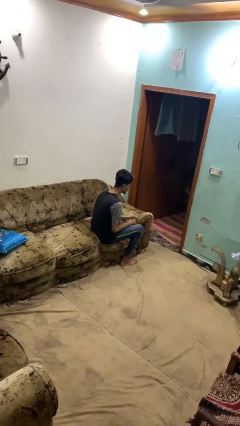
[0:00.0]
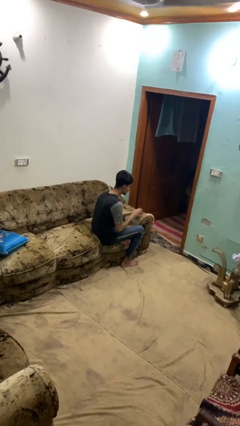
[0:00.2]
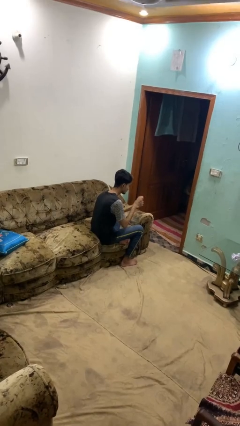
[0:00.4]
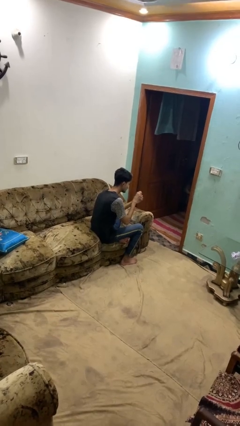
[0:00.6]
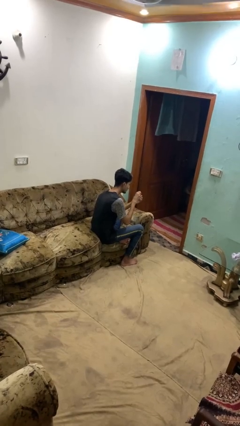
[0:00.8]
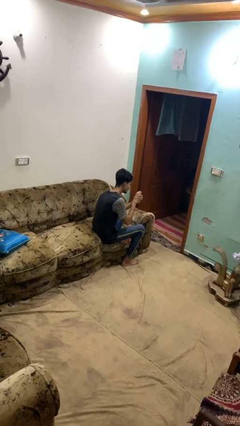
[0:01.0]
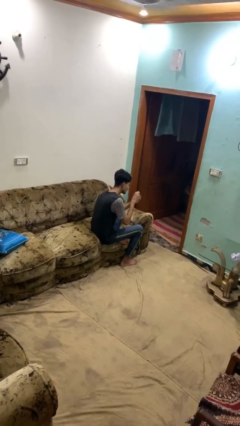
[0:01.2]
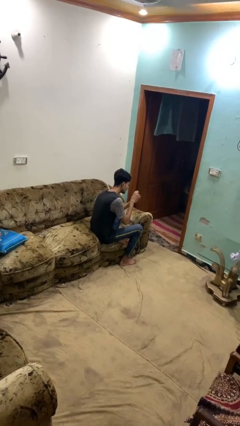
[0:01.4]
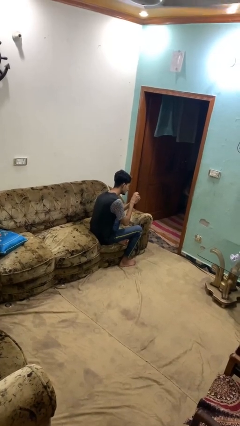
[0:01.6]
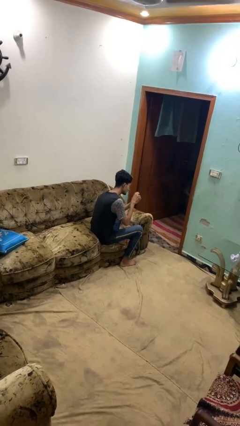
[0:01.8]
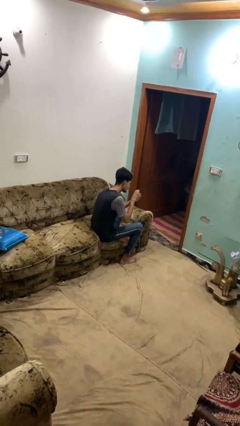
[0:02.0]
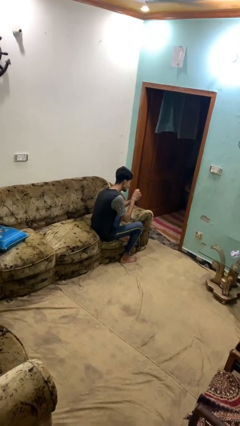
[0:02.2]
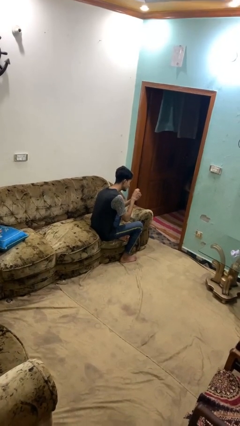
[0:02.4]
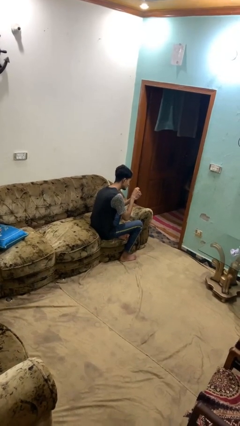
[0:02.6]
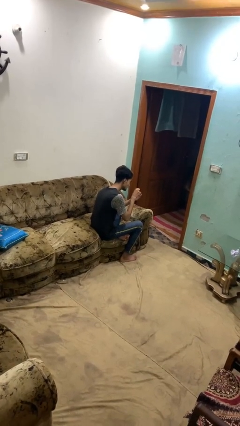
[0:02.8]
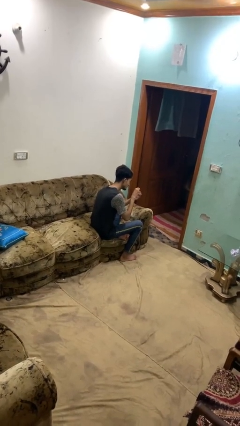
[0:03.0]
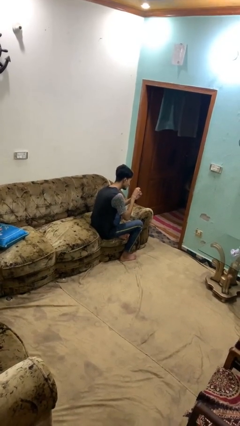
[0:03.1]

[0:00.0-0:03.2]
person clips fingernails

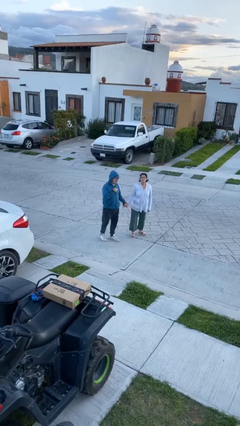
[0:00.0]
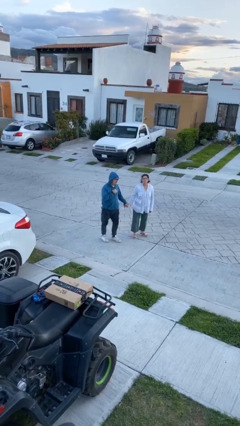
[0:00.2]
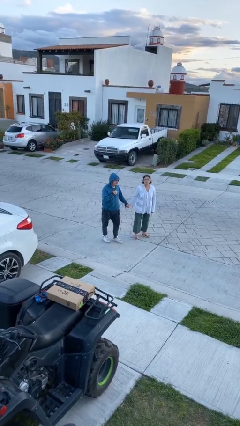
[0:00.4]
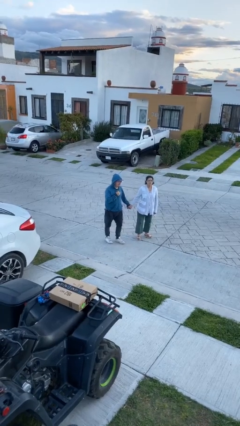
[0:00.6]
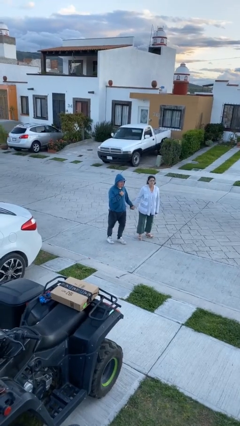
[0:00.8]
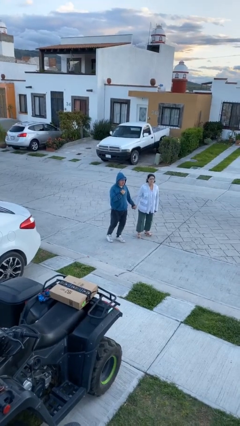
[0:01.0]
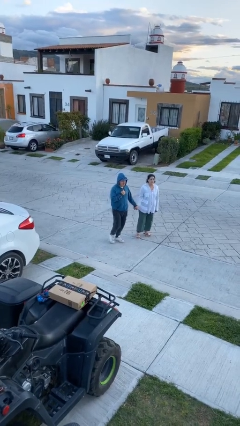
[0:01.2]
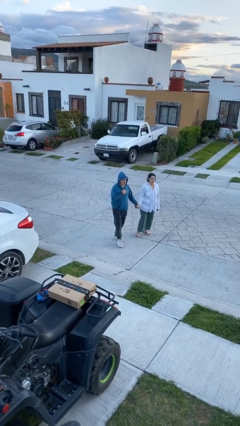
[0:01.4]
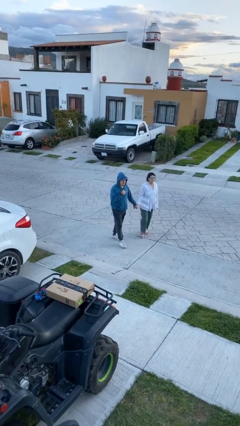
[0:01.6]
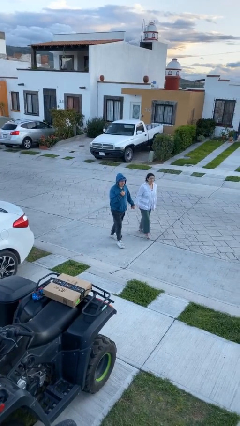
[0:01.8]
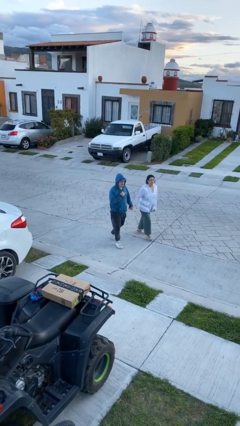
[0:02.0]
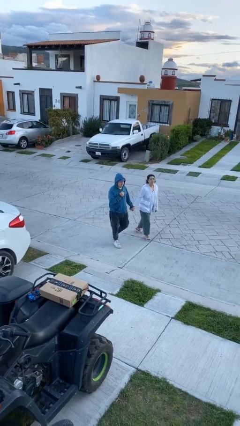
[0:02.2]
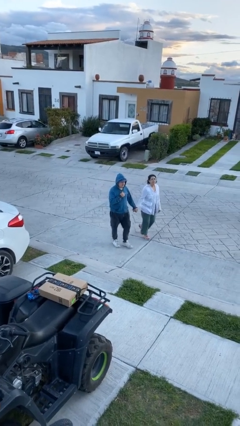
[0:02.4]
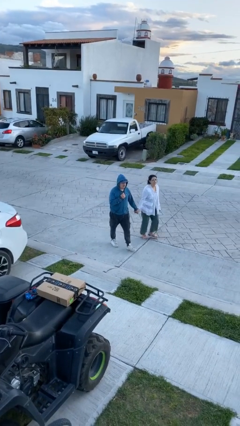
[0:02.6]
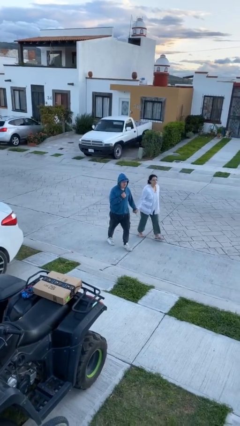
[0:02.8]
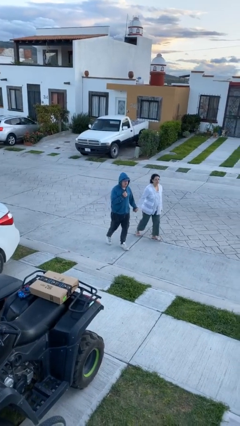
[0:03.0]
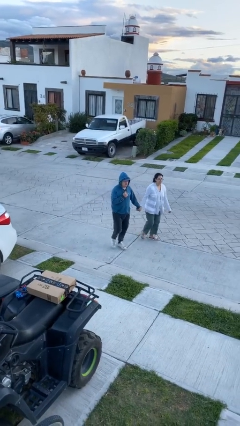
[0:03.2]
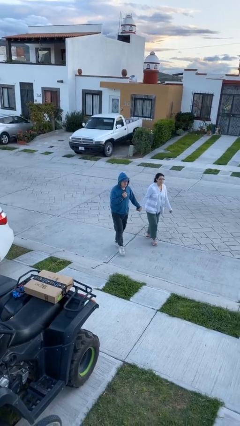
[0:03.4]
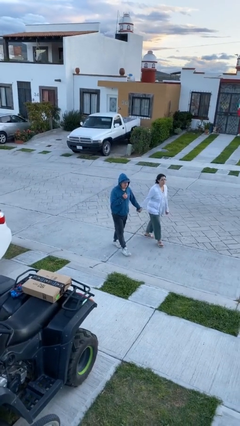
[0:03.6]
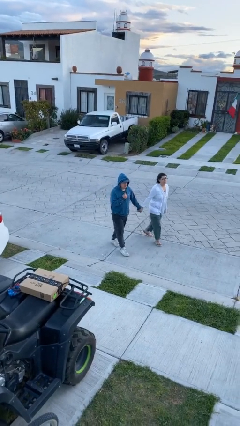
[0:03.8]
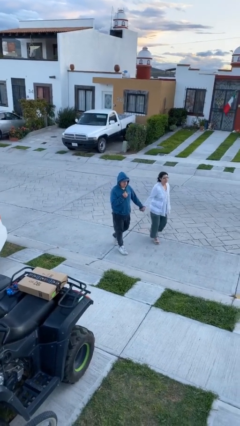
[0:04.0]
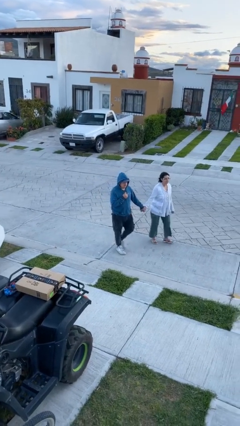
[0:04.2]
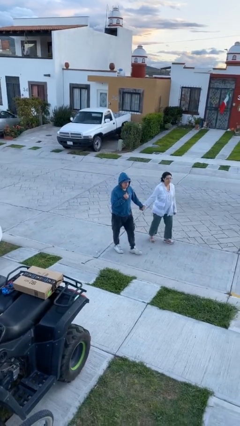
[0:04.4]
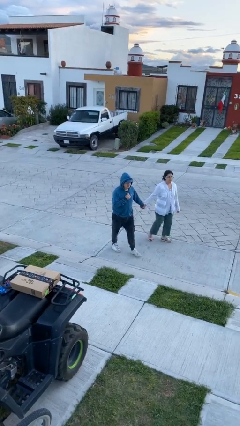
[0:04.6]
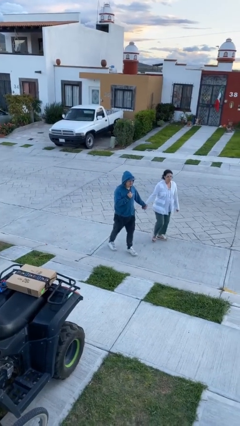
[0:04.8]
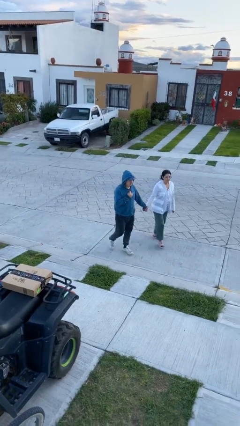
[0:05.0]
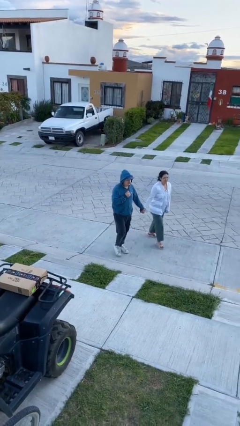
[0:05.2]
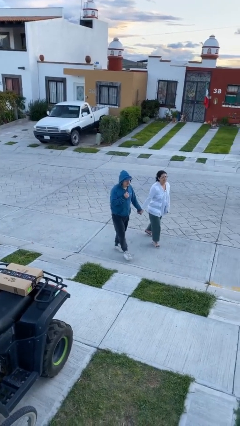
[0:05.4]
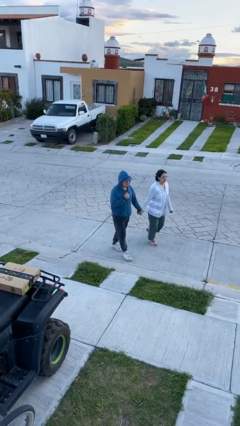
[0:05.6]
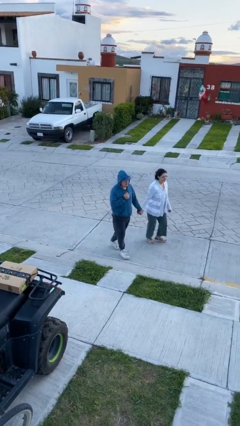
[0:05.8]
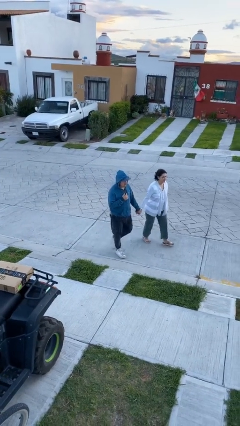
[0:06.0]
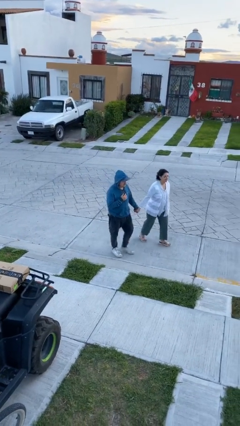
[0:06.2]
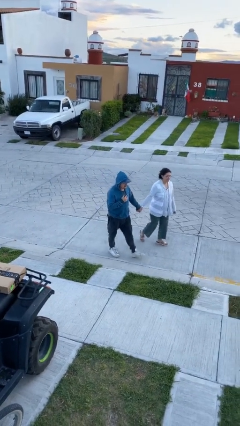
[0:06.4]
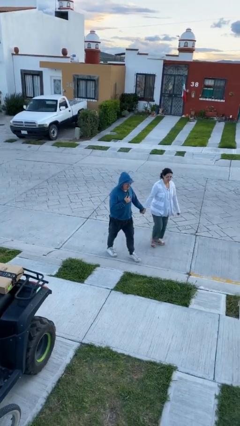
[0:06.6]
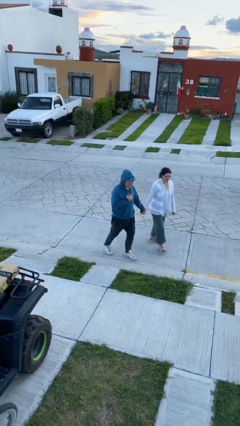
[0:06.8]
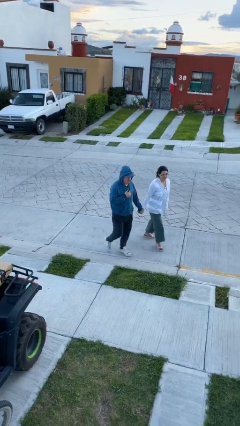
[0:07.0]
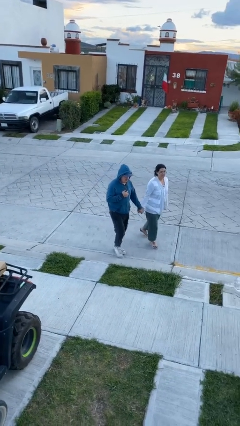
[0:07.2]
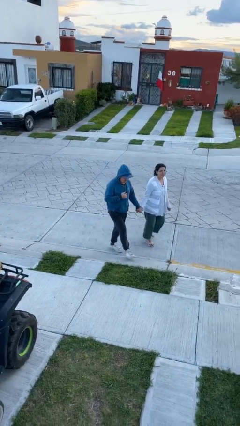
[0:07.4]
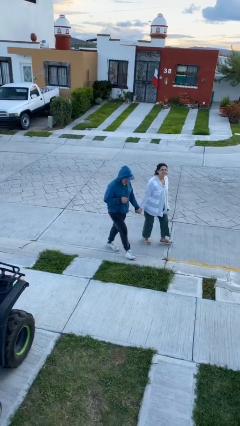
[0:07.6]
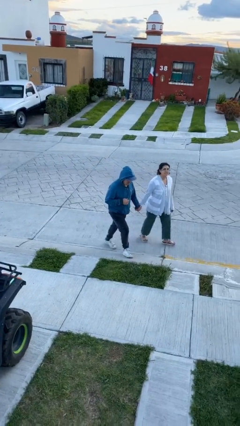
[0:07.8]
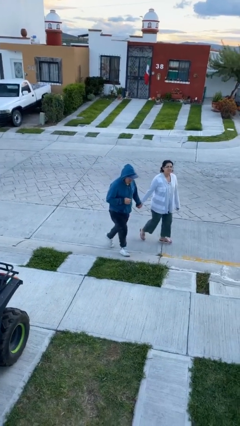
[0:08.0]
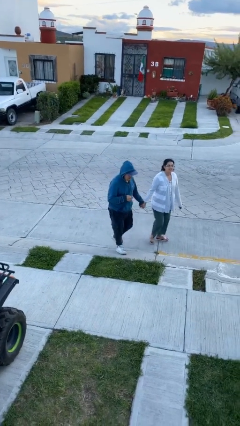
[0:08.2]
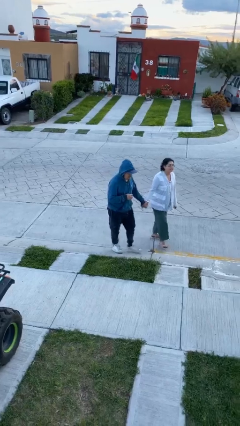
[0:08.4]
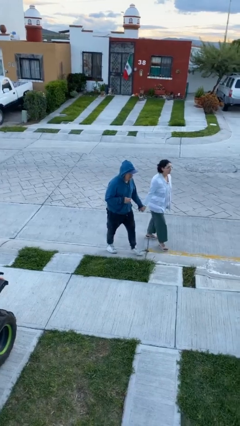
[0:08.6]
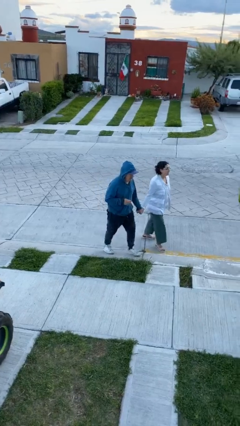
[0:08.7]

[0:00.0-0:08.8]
person holds hand

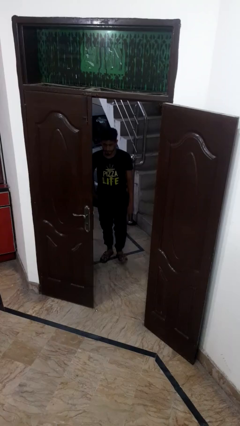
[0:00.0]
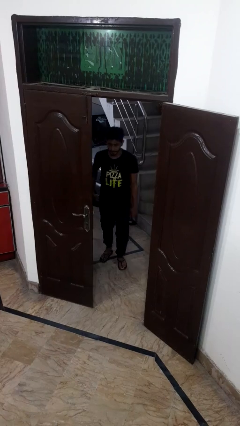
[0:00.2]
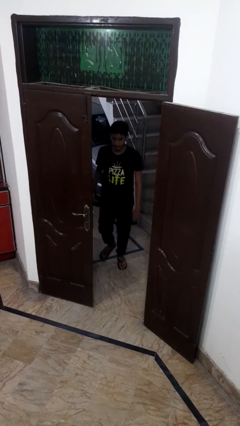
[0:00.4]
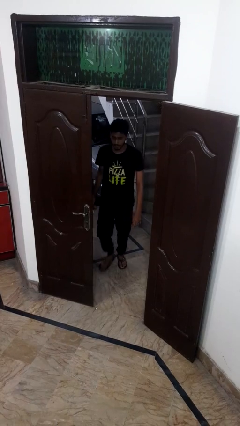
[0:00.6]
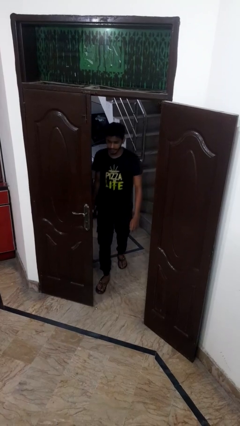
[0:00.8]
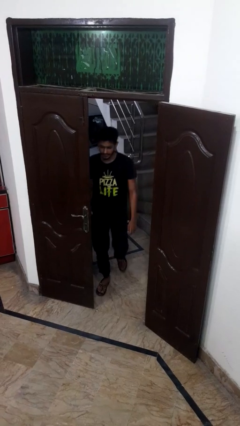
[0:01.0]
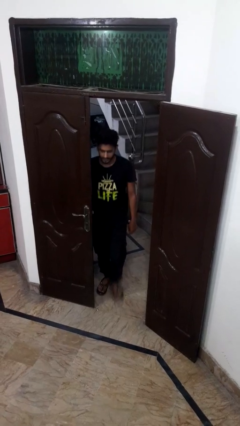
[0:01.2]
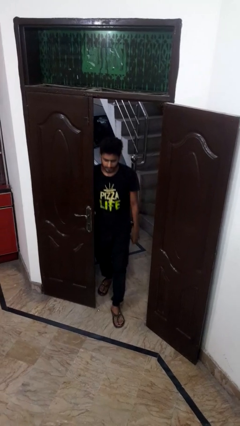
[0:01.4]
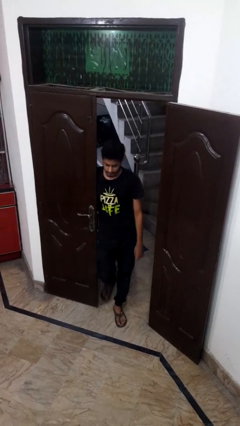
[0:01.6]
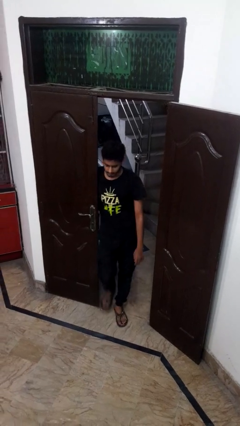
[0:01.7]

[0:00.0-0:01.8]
person bumps into wall

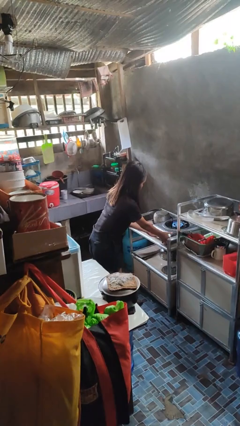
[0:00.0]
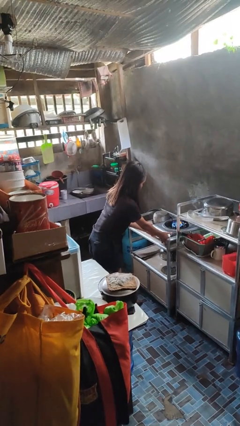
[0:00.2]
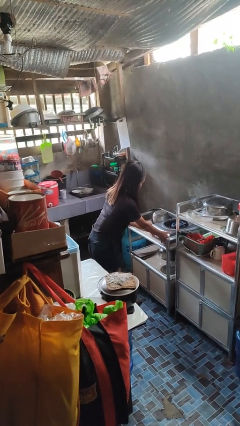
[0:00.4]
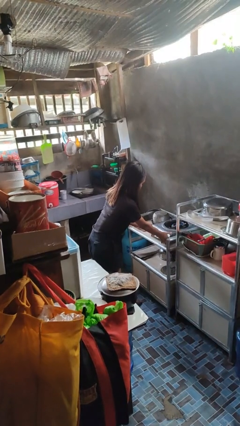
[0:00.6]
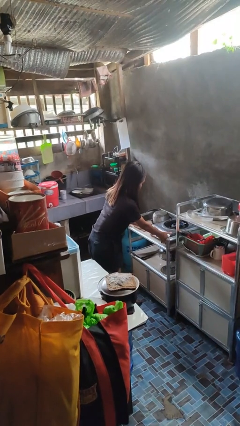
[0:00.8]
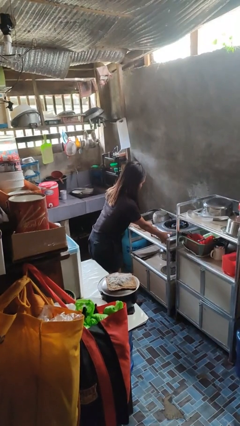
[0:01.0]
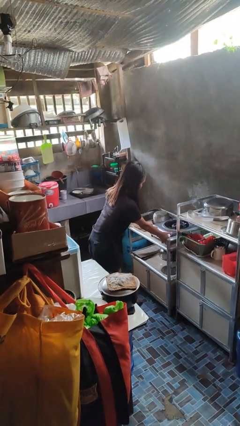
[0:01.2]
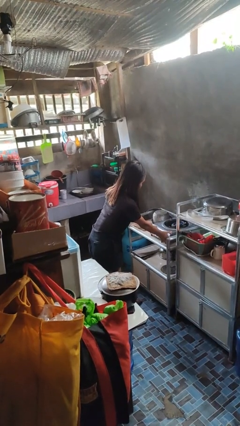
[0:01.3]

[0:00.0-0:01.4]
person turns off stovetop

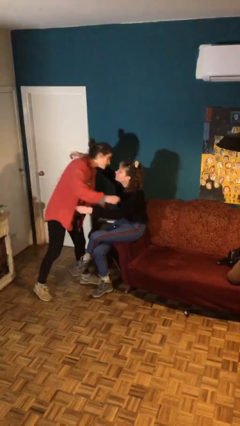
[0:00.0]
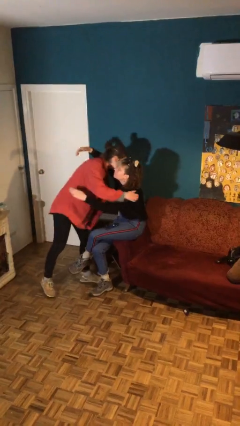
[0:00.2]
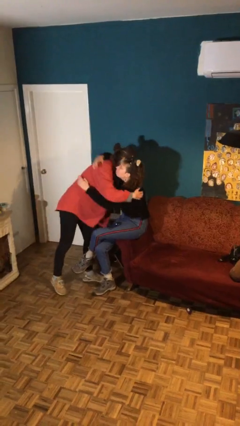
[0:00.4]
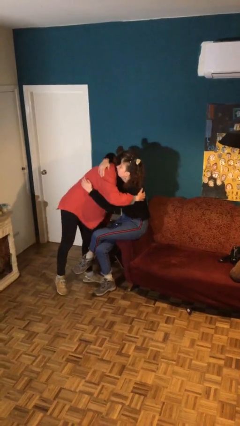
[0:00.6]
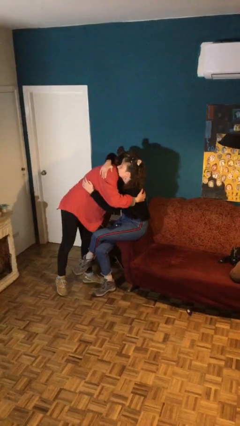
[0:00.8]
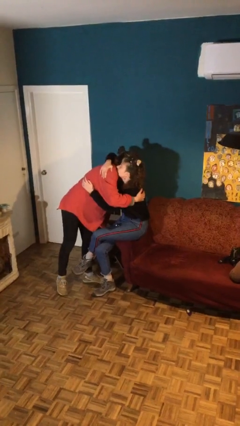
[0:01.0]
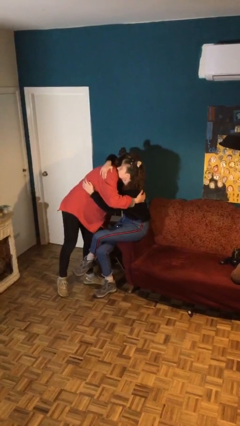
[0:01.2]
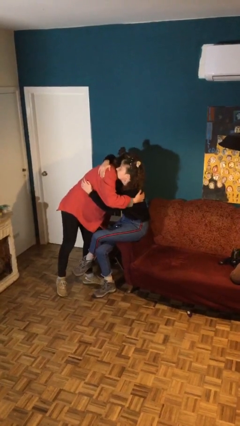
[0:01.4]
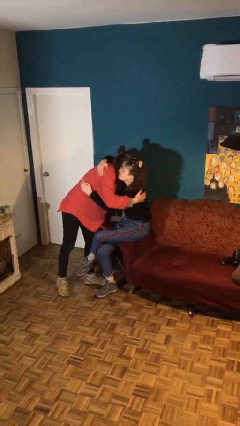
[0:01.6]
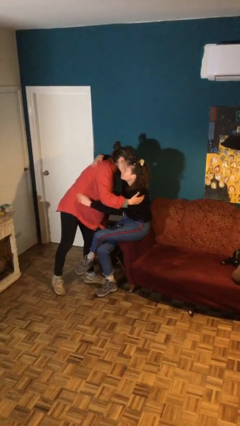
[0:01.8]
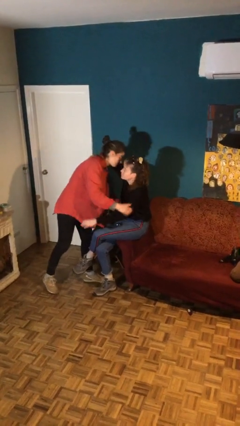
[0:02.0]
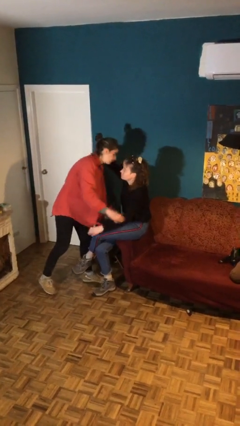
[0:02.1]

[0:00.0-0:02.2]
person embraces person

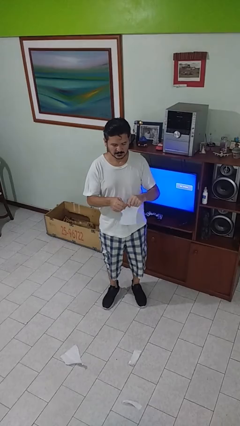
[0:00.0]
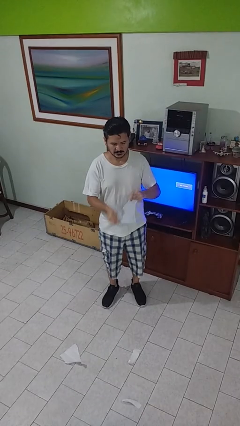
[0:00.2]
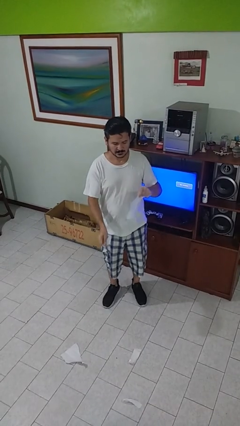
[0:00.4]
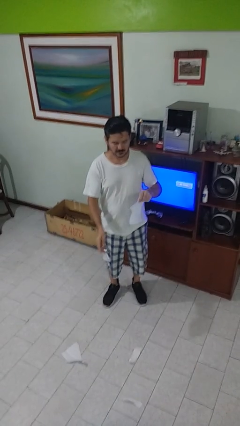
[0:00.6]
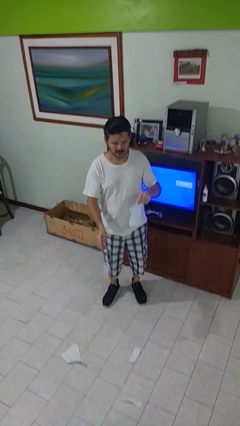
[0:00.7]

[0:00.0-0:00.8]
person tears paper
